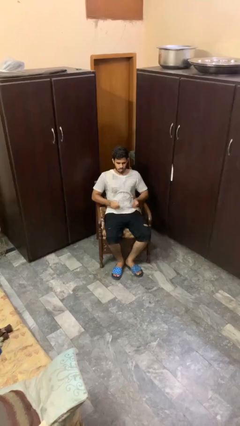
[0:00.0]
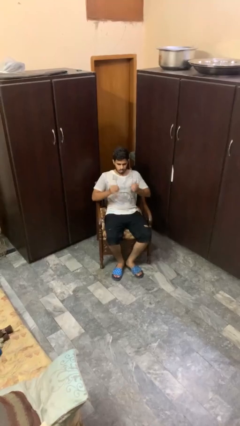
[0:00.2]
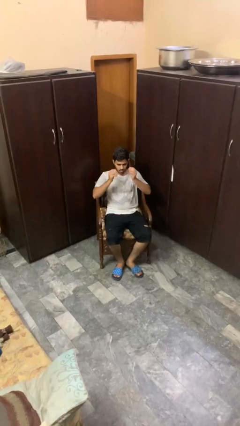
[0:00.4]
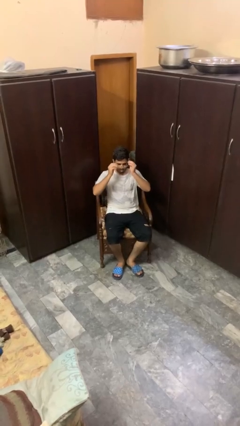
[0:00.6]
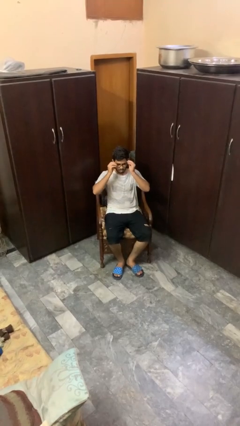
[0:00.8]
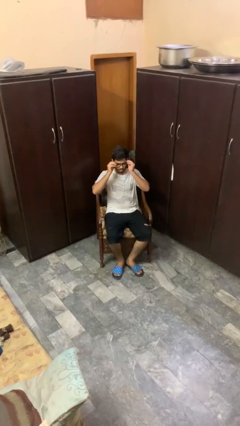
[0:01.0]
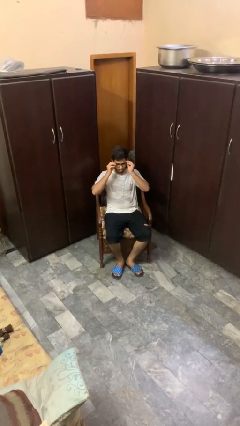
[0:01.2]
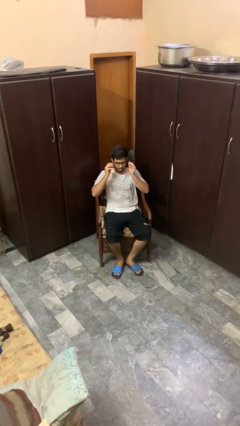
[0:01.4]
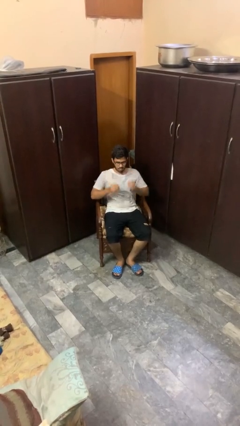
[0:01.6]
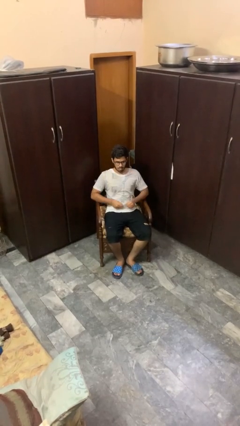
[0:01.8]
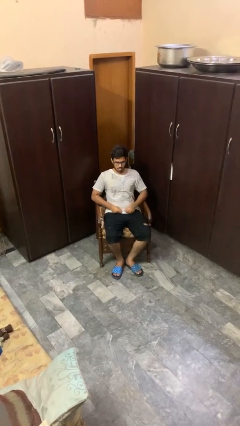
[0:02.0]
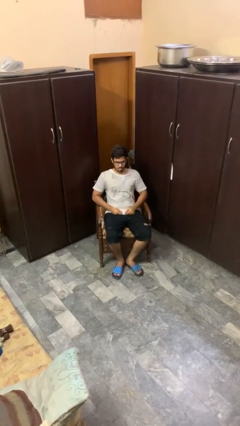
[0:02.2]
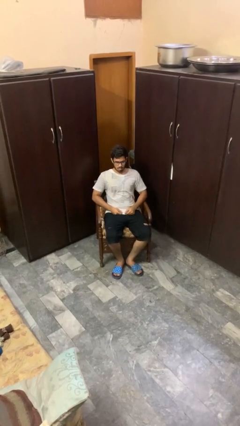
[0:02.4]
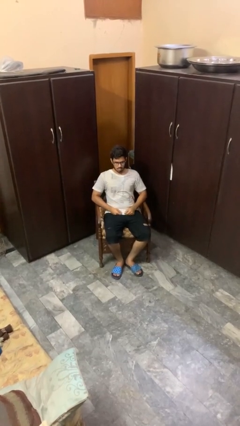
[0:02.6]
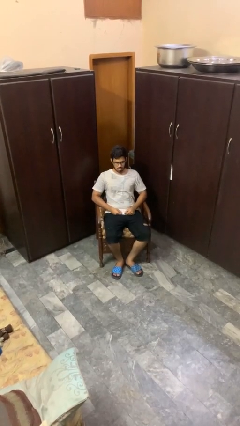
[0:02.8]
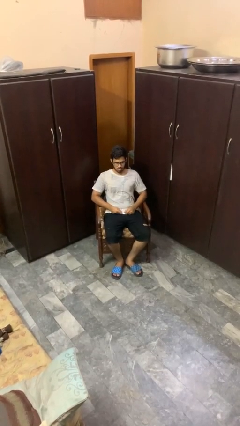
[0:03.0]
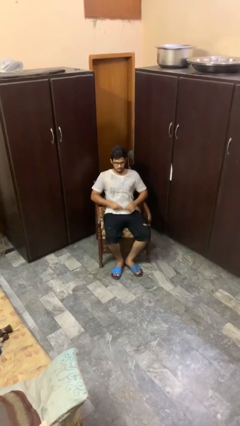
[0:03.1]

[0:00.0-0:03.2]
person puts on glasses

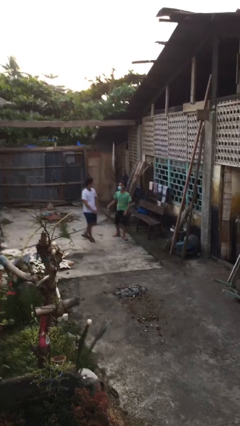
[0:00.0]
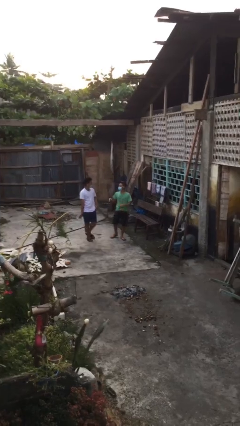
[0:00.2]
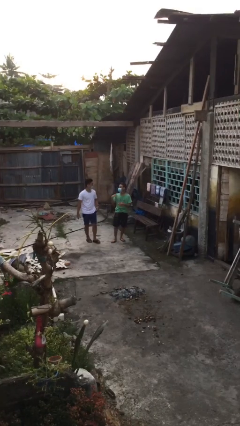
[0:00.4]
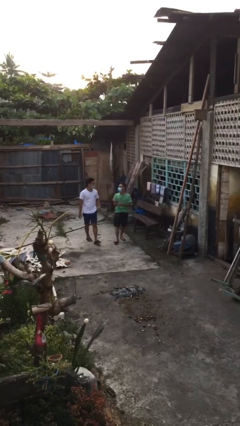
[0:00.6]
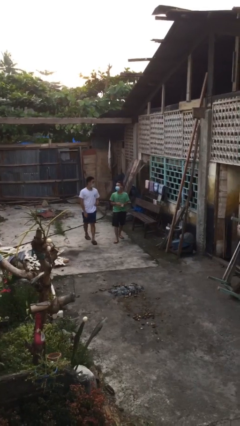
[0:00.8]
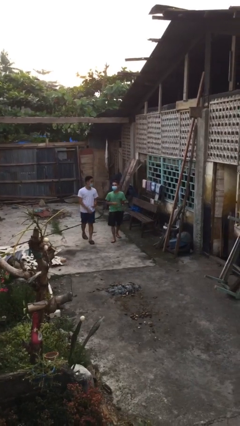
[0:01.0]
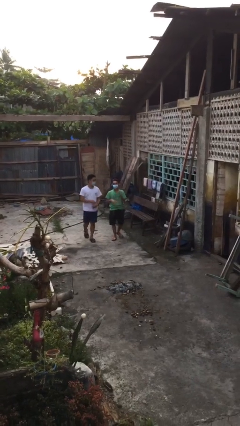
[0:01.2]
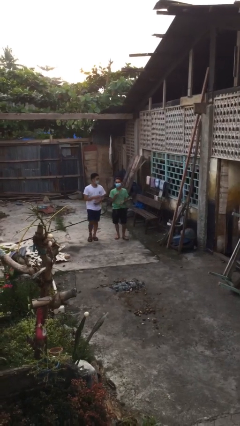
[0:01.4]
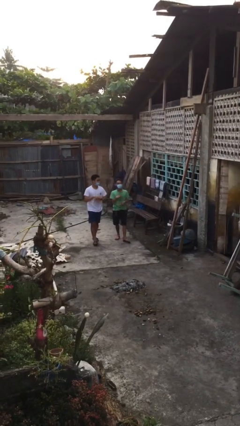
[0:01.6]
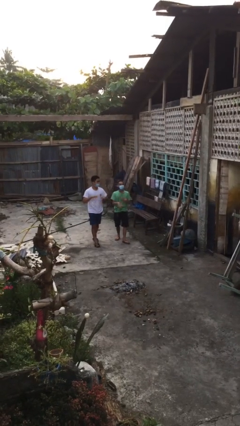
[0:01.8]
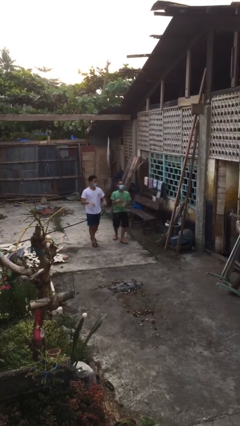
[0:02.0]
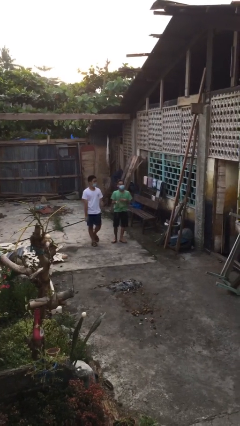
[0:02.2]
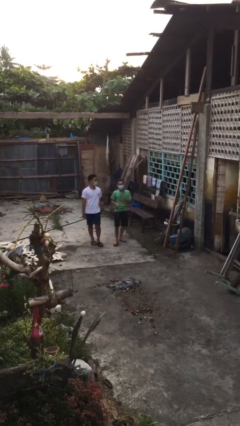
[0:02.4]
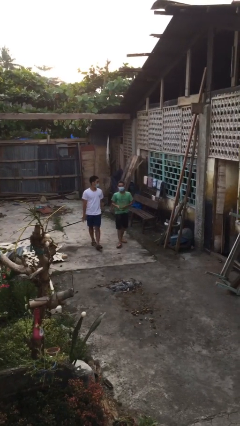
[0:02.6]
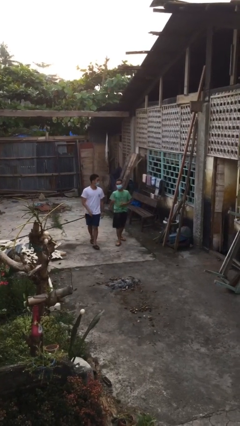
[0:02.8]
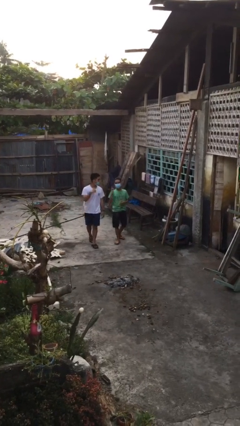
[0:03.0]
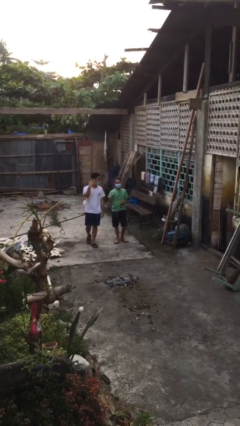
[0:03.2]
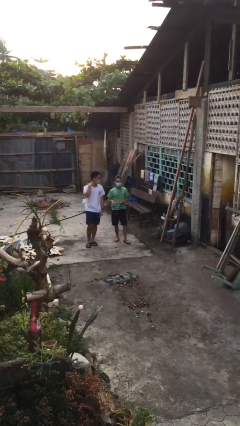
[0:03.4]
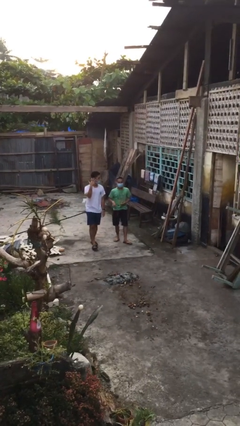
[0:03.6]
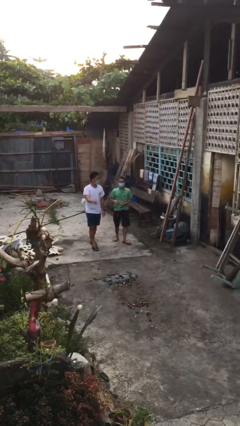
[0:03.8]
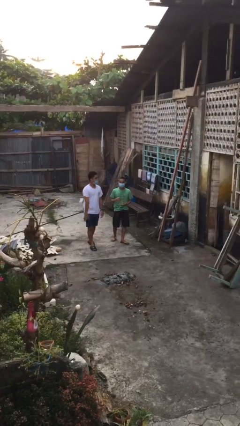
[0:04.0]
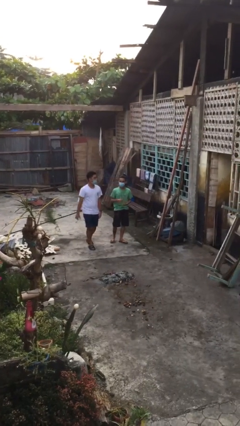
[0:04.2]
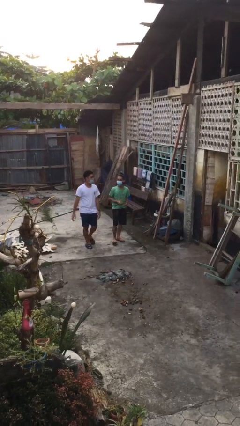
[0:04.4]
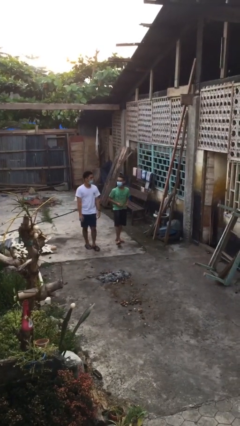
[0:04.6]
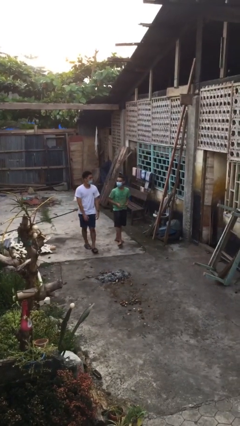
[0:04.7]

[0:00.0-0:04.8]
person talks to person

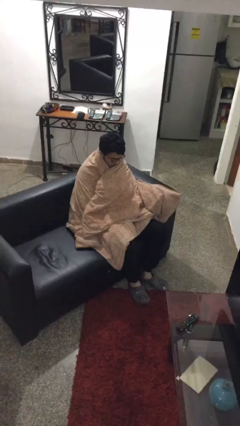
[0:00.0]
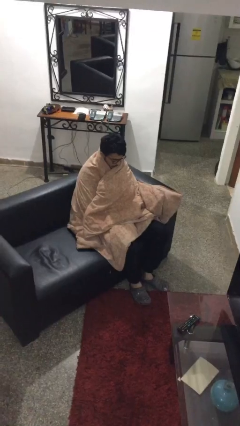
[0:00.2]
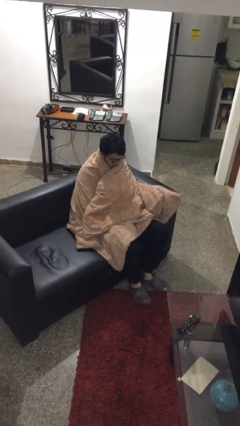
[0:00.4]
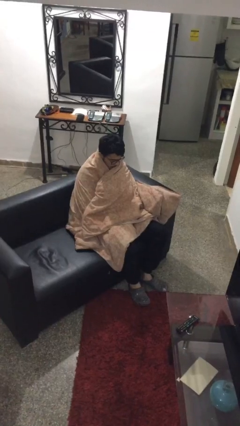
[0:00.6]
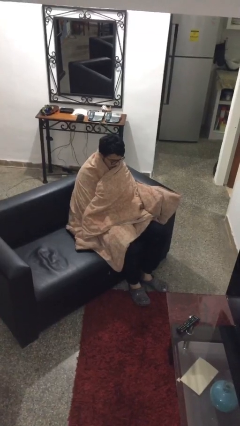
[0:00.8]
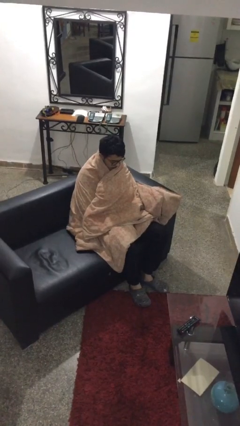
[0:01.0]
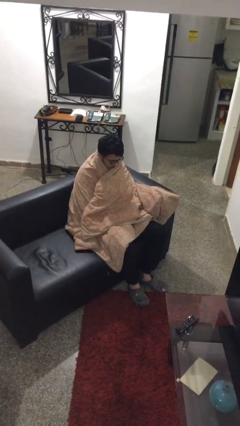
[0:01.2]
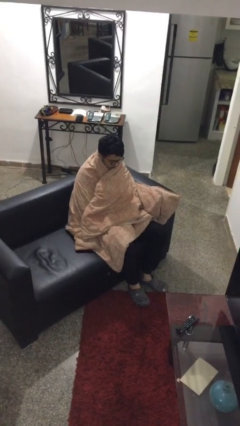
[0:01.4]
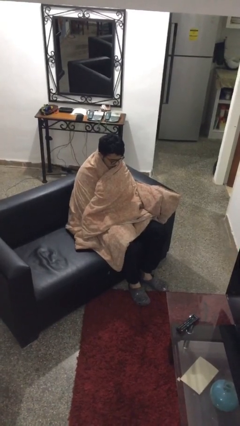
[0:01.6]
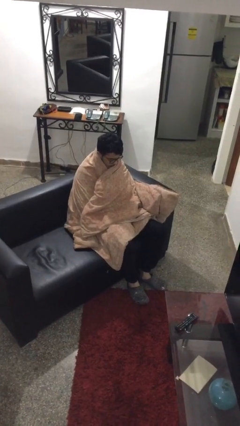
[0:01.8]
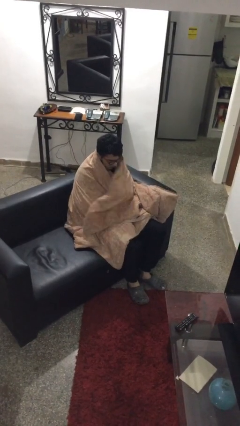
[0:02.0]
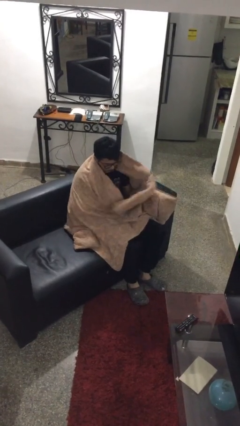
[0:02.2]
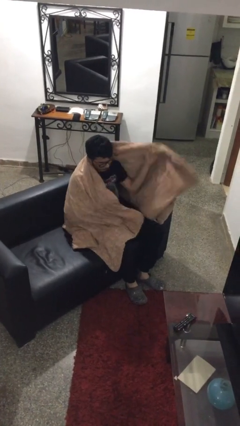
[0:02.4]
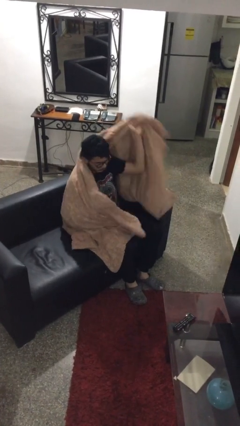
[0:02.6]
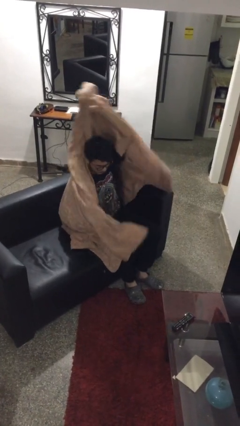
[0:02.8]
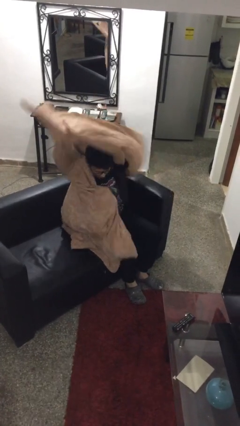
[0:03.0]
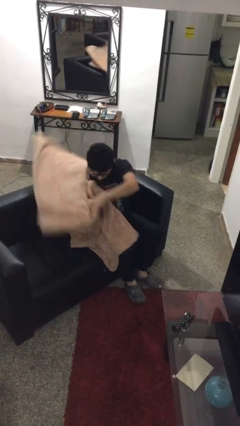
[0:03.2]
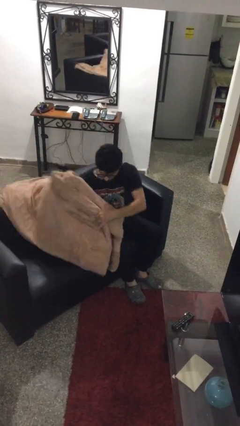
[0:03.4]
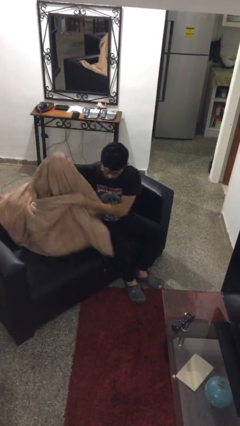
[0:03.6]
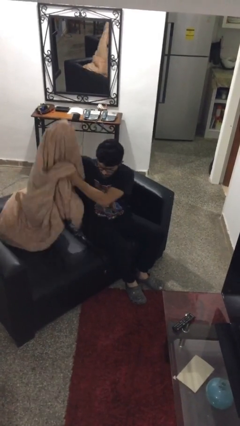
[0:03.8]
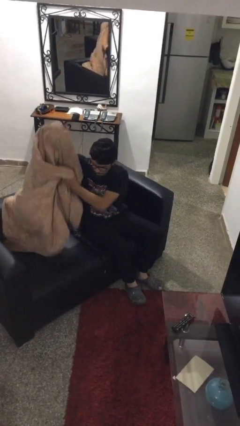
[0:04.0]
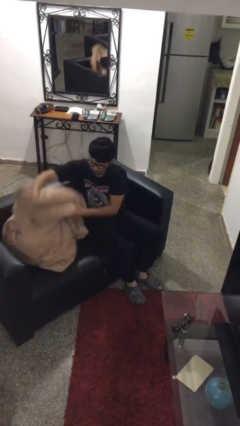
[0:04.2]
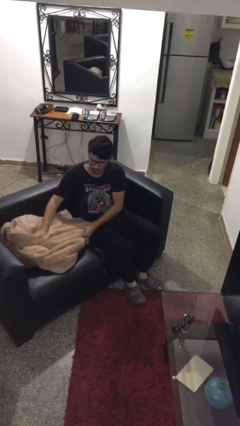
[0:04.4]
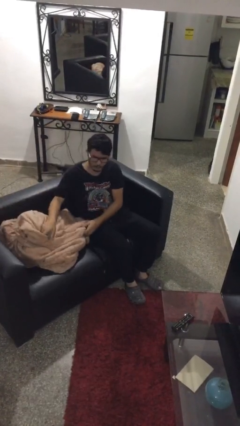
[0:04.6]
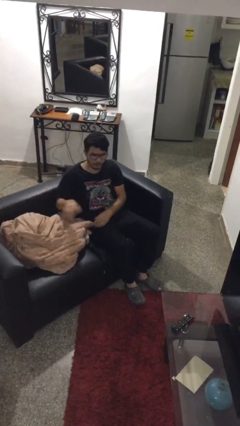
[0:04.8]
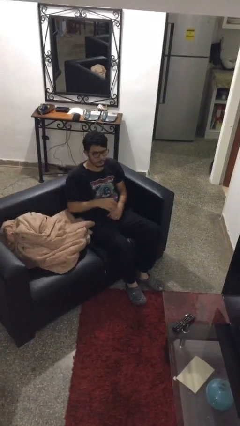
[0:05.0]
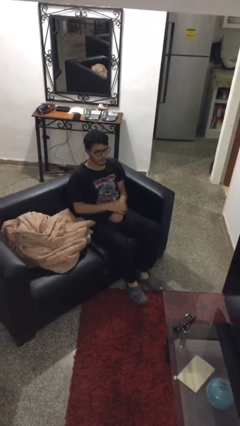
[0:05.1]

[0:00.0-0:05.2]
person uncovers with blanket

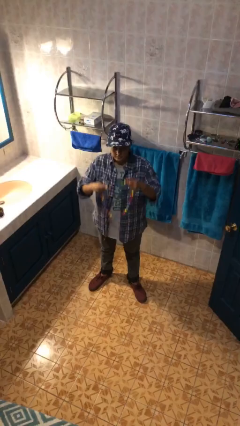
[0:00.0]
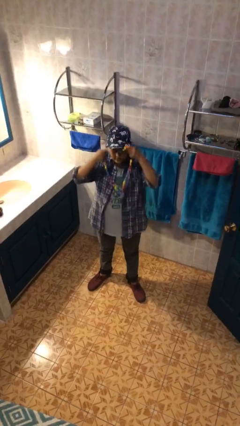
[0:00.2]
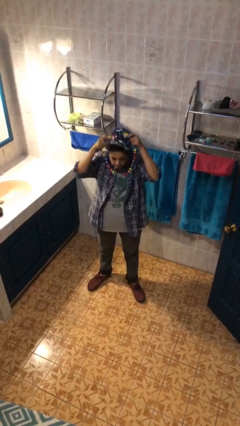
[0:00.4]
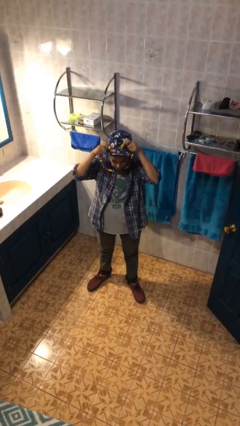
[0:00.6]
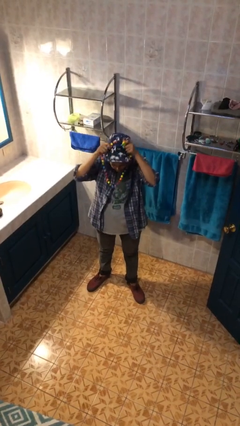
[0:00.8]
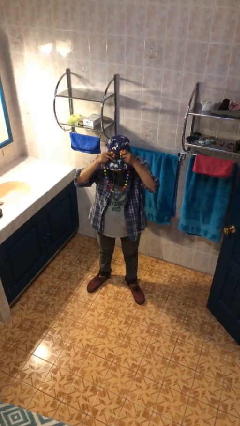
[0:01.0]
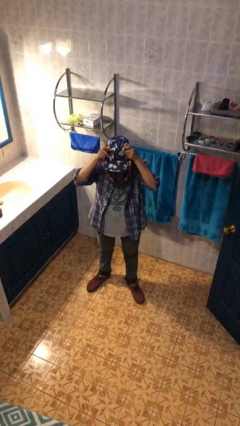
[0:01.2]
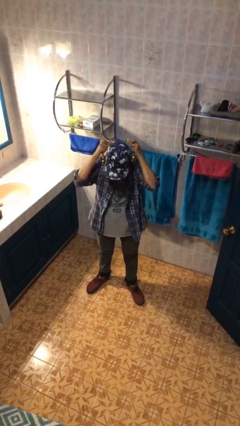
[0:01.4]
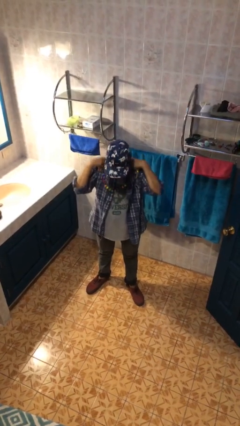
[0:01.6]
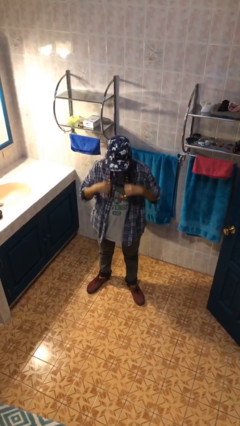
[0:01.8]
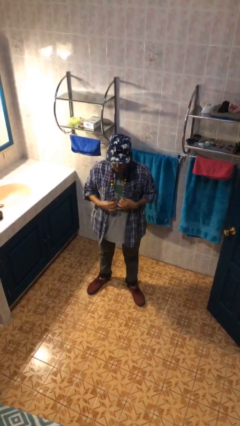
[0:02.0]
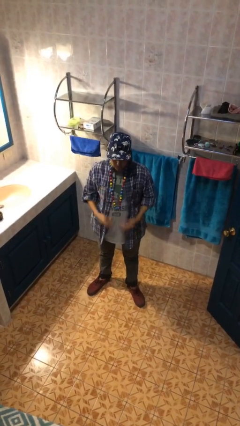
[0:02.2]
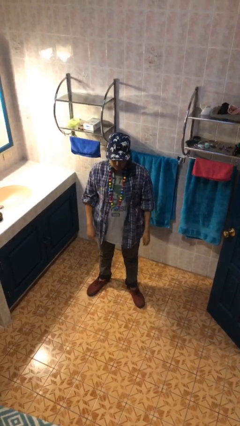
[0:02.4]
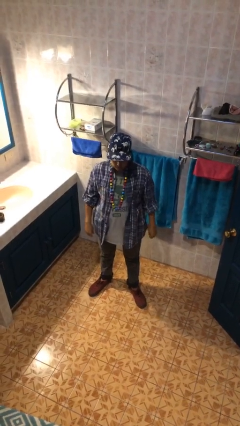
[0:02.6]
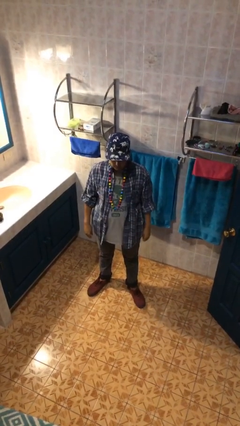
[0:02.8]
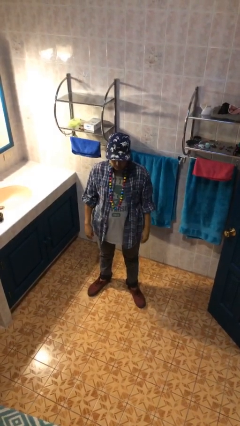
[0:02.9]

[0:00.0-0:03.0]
person puts on necklace

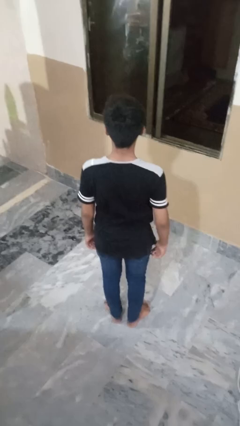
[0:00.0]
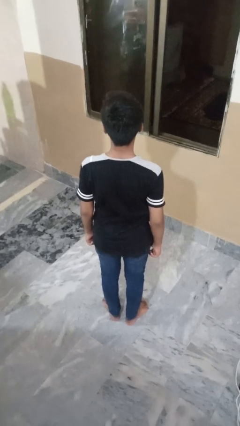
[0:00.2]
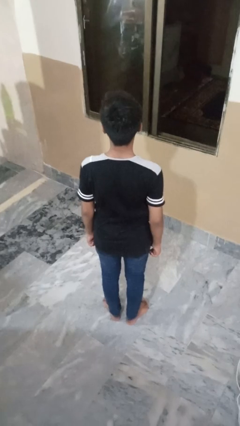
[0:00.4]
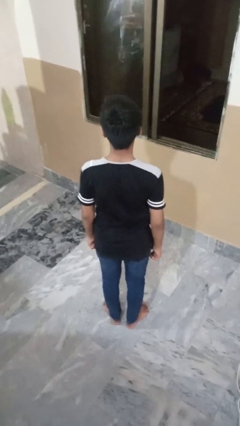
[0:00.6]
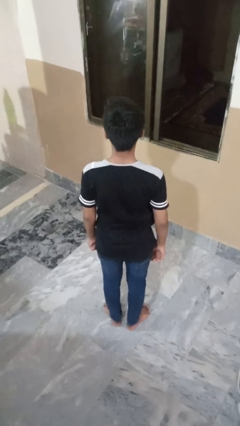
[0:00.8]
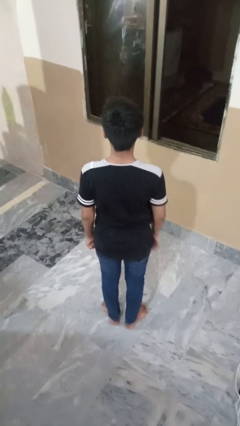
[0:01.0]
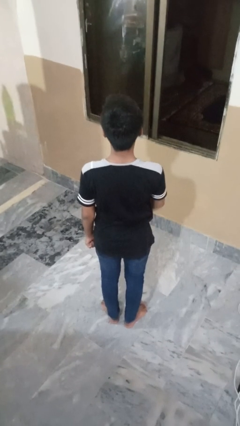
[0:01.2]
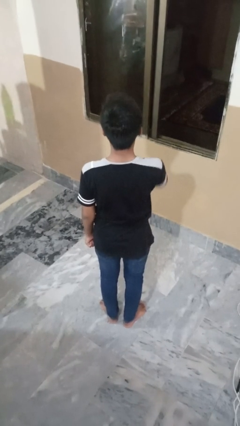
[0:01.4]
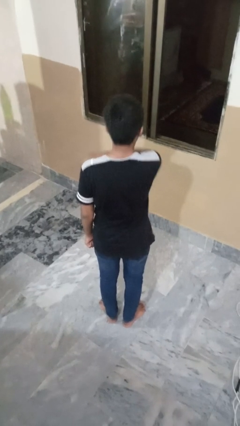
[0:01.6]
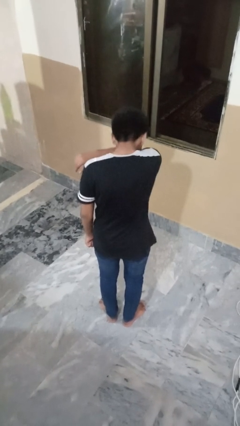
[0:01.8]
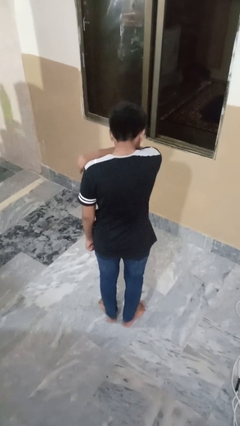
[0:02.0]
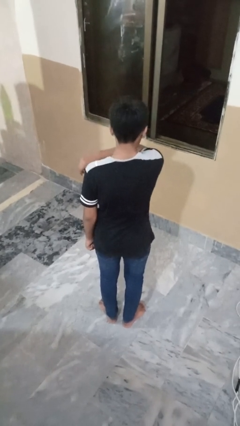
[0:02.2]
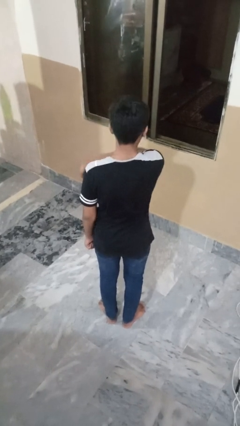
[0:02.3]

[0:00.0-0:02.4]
person sneezes into arm
